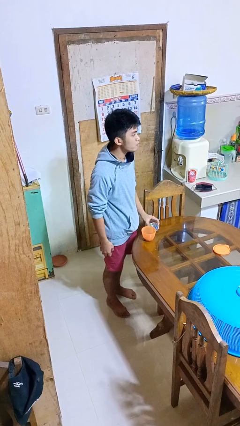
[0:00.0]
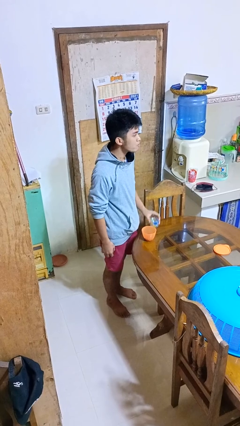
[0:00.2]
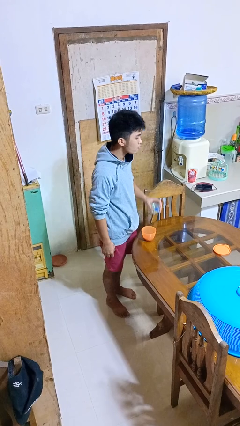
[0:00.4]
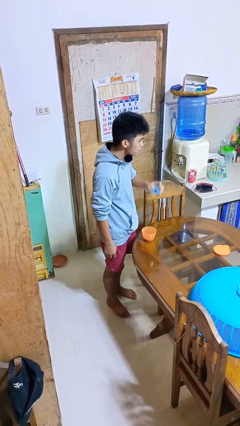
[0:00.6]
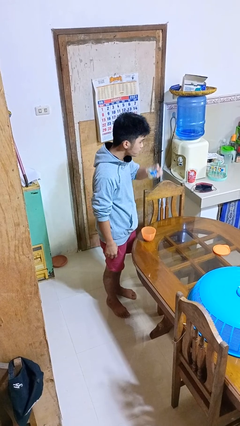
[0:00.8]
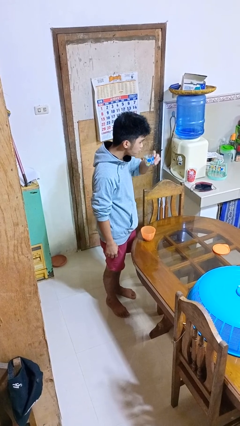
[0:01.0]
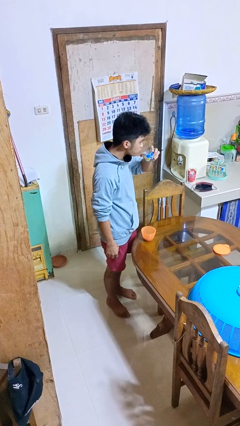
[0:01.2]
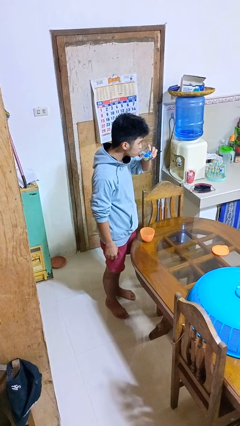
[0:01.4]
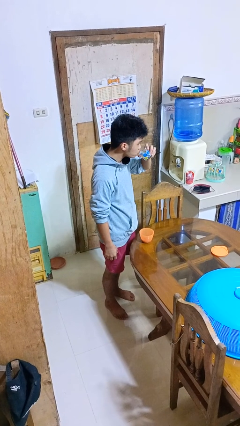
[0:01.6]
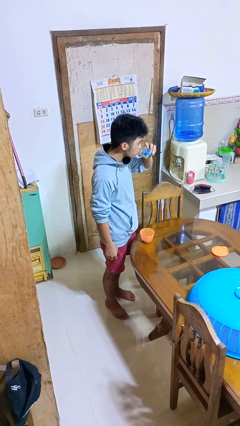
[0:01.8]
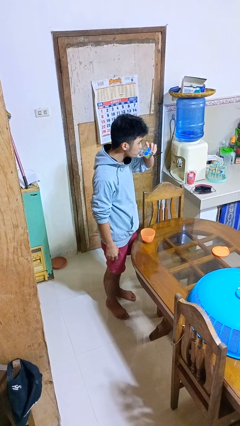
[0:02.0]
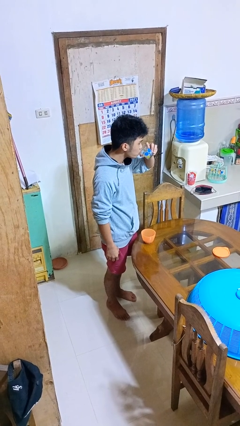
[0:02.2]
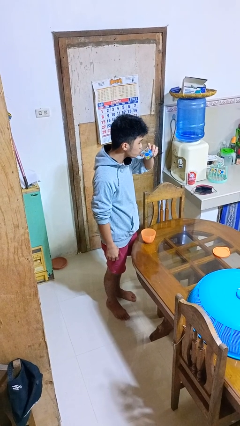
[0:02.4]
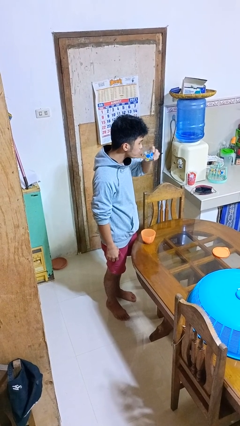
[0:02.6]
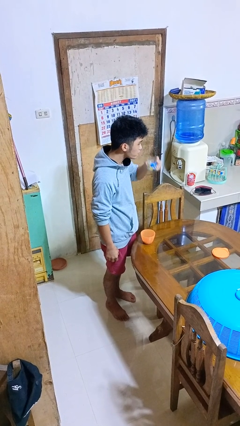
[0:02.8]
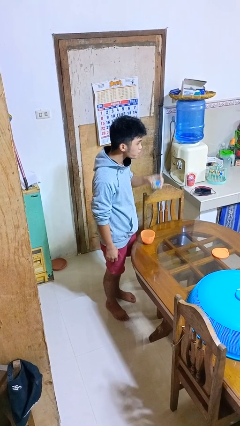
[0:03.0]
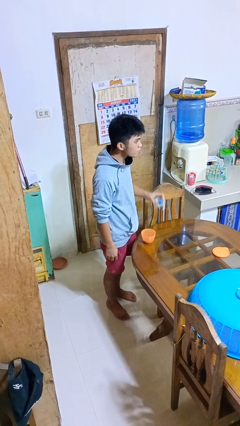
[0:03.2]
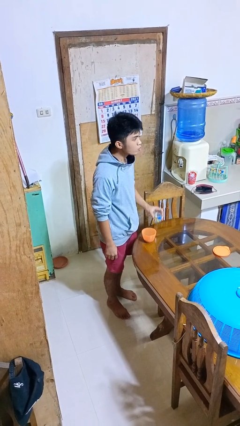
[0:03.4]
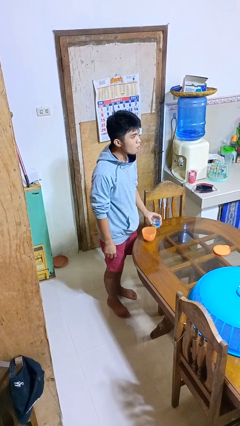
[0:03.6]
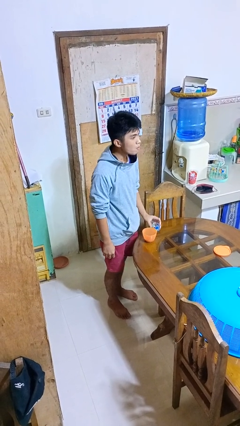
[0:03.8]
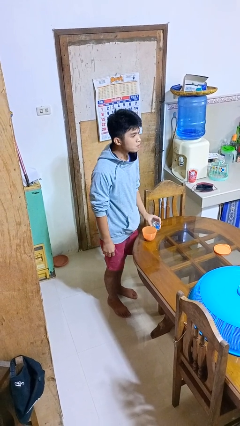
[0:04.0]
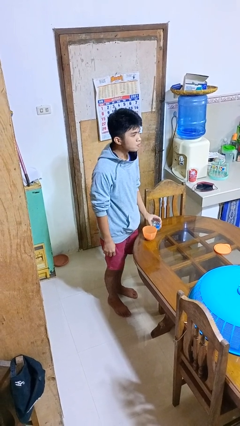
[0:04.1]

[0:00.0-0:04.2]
person drinks from cup

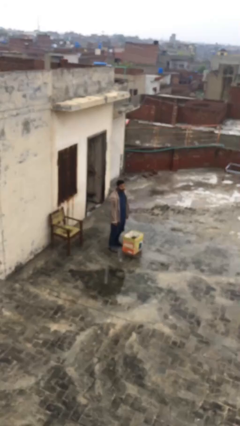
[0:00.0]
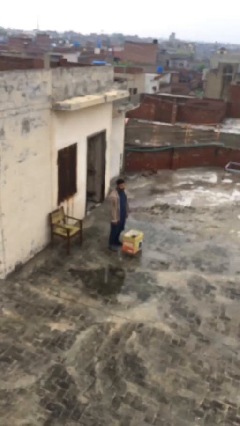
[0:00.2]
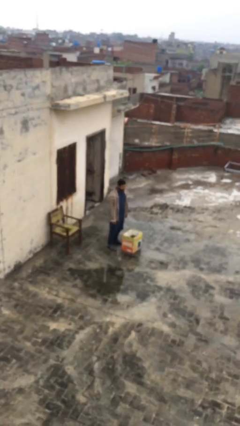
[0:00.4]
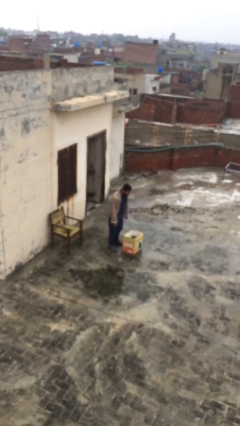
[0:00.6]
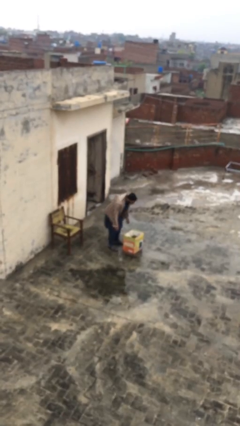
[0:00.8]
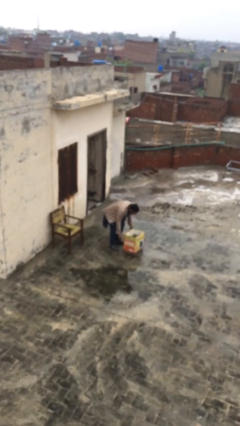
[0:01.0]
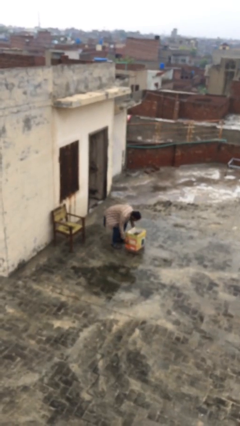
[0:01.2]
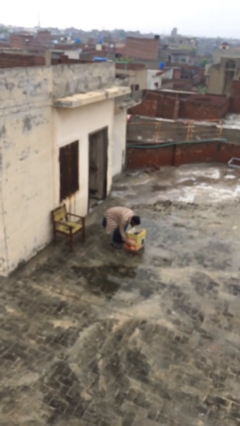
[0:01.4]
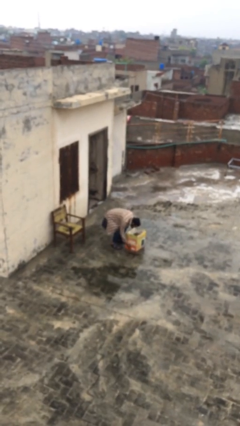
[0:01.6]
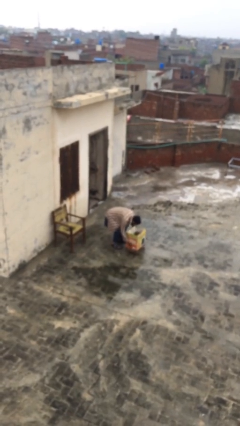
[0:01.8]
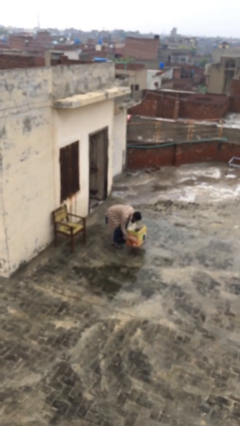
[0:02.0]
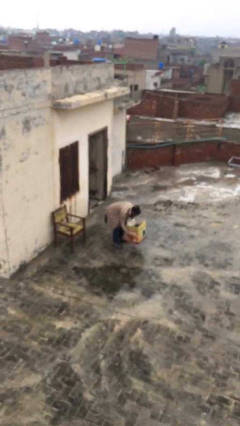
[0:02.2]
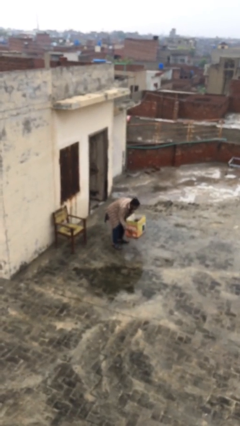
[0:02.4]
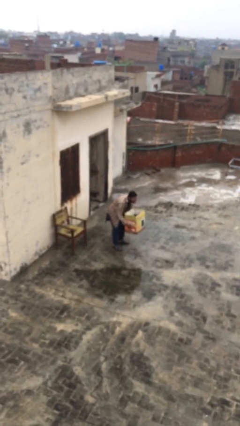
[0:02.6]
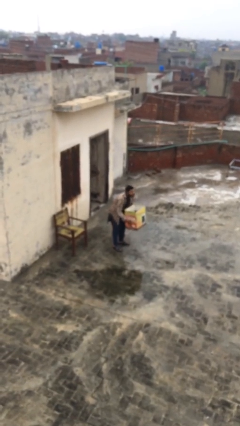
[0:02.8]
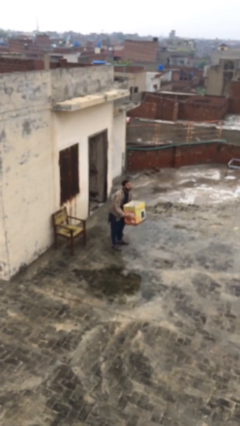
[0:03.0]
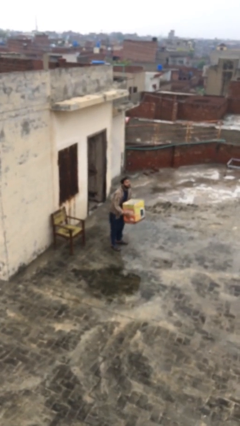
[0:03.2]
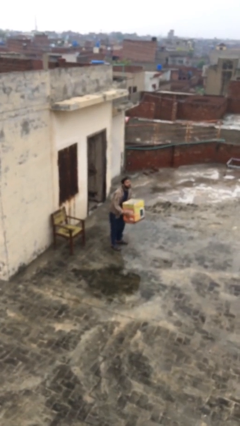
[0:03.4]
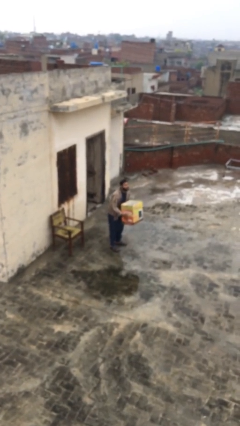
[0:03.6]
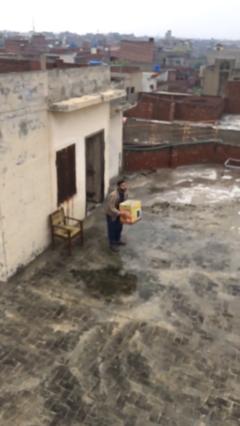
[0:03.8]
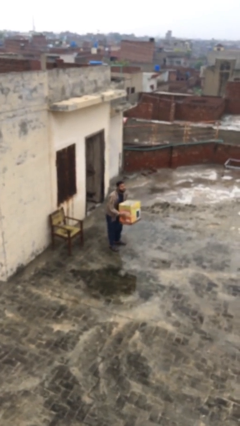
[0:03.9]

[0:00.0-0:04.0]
person picks up object from floor

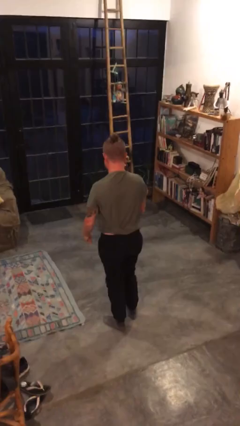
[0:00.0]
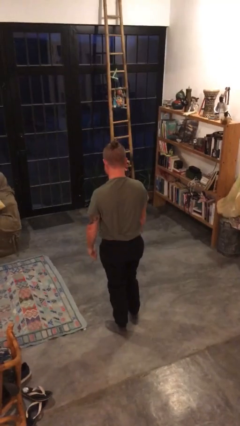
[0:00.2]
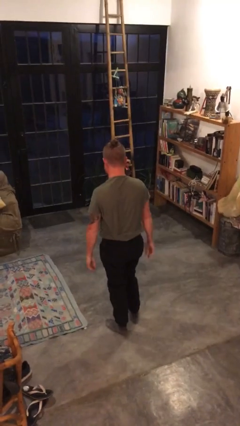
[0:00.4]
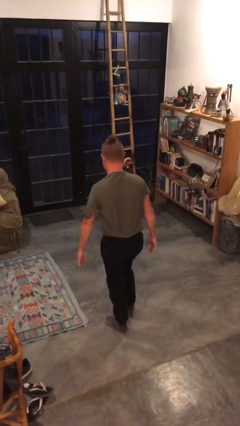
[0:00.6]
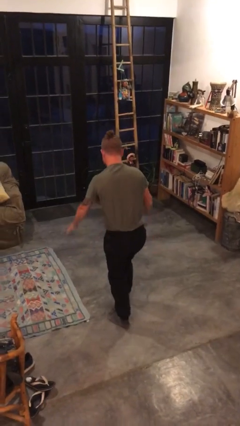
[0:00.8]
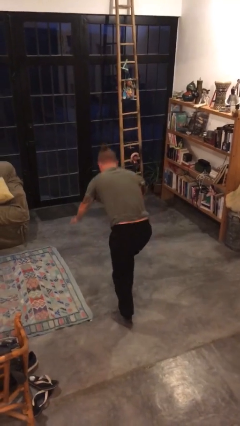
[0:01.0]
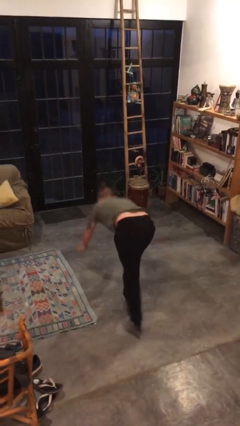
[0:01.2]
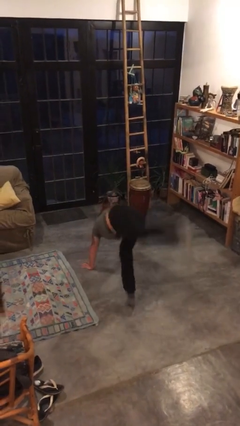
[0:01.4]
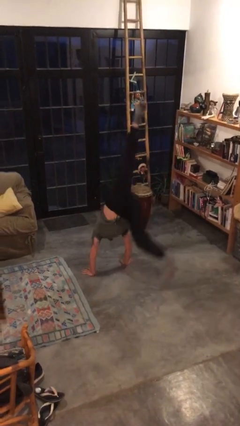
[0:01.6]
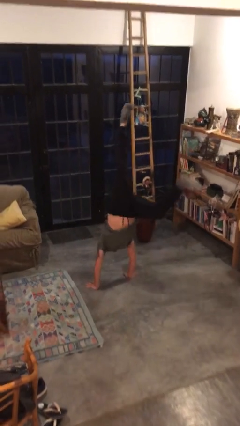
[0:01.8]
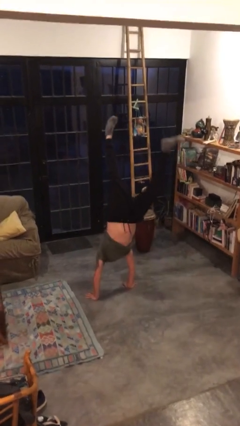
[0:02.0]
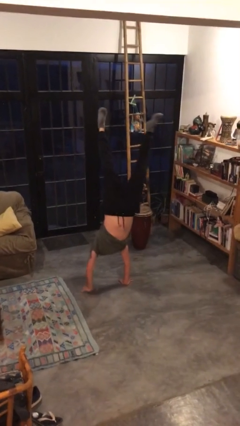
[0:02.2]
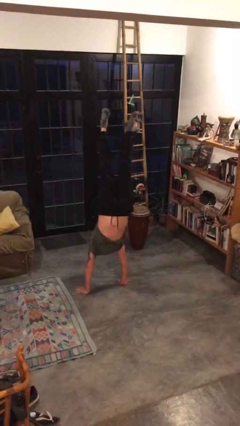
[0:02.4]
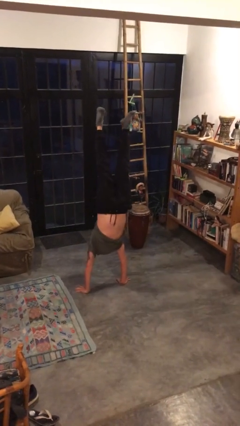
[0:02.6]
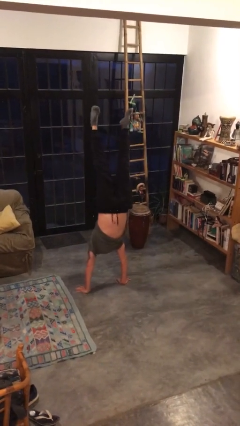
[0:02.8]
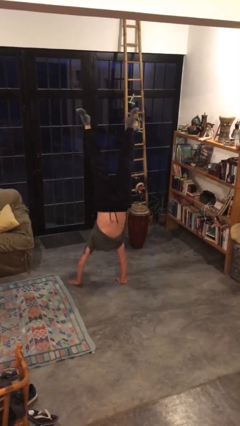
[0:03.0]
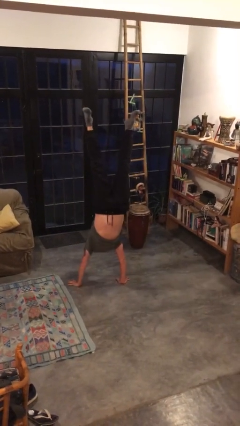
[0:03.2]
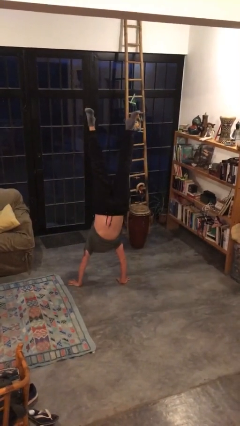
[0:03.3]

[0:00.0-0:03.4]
person handstand

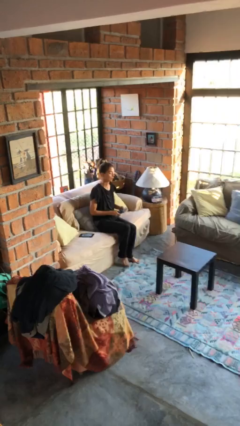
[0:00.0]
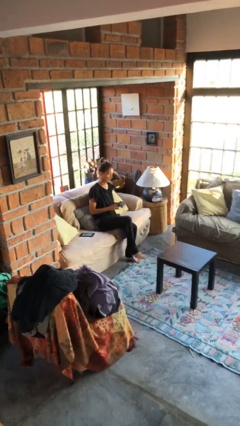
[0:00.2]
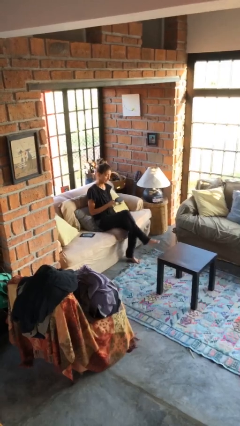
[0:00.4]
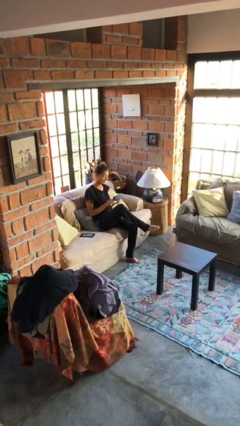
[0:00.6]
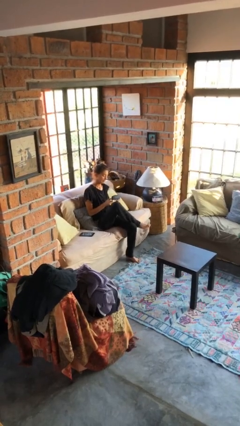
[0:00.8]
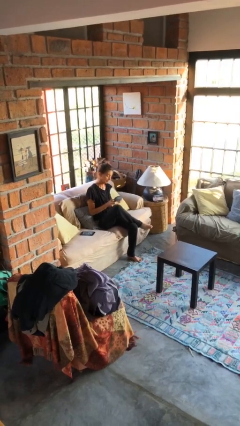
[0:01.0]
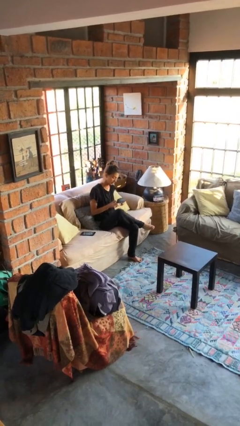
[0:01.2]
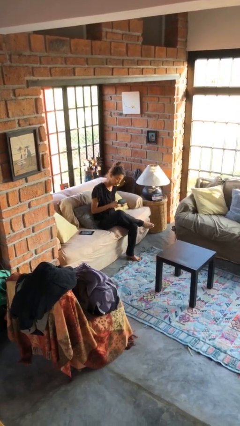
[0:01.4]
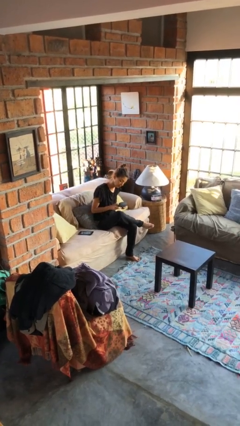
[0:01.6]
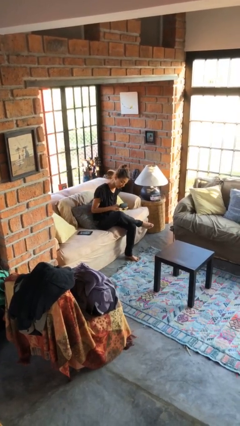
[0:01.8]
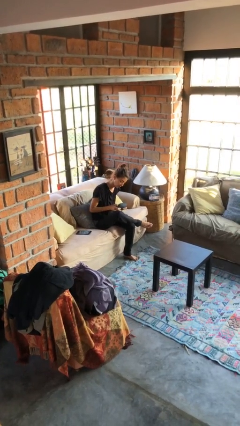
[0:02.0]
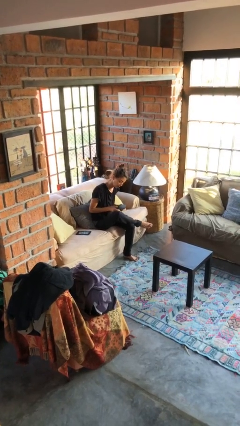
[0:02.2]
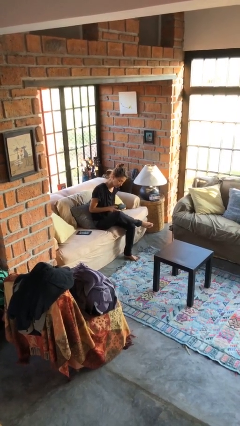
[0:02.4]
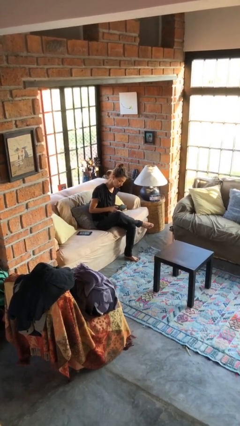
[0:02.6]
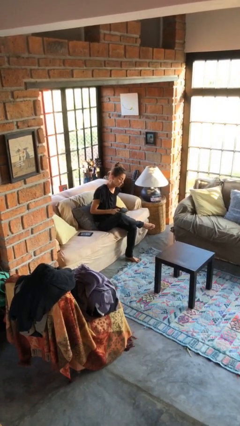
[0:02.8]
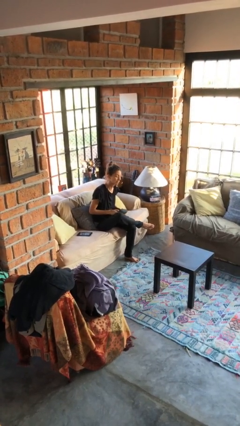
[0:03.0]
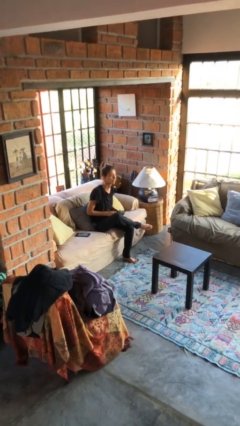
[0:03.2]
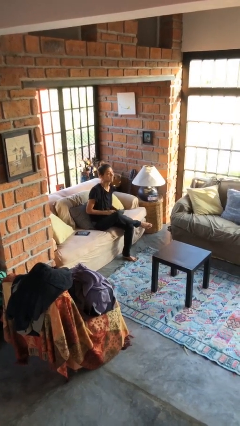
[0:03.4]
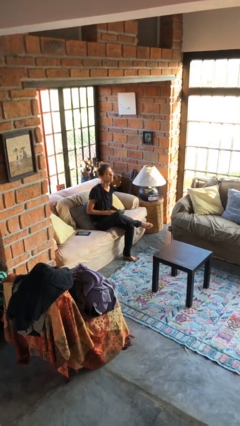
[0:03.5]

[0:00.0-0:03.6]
person interacts with handheld game

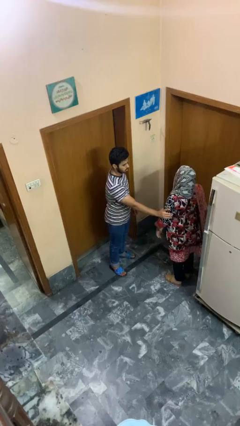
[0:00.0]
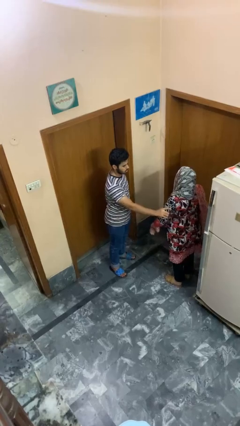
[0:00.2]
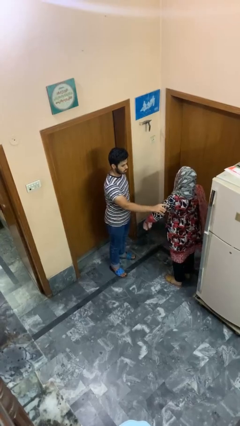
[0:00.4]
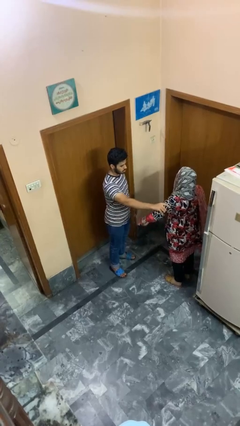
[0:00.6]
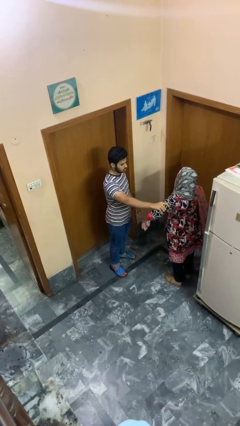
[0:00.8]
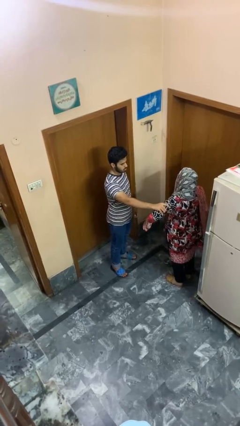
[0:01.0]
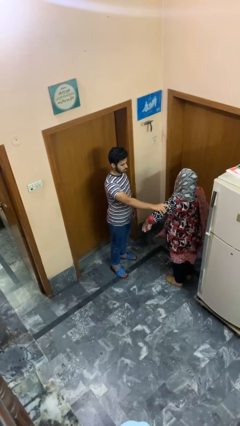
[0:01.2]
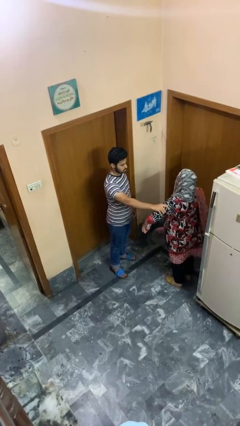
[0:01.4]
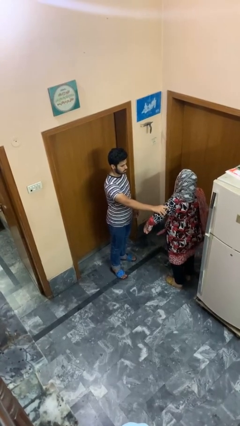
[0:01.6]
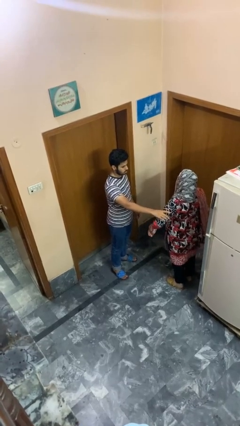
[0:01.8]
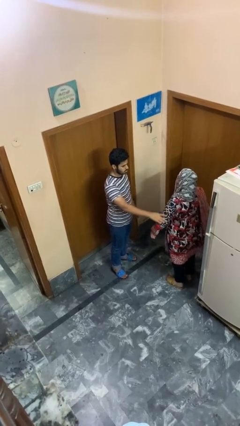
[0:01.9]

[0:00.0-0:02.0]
person grabs person by bicep

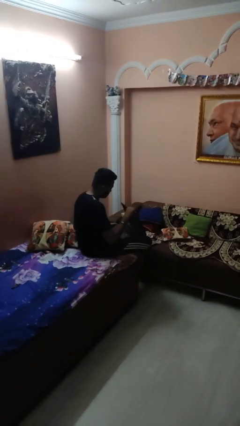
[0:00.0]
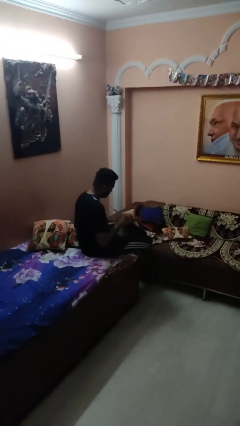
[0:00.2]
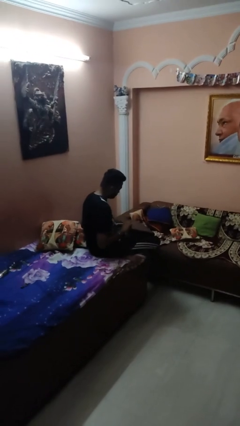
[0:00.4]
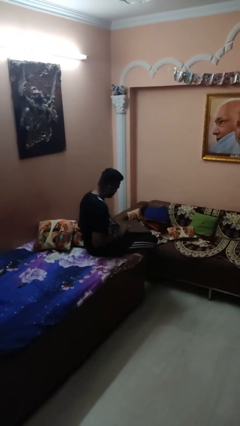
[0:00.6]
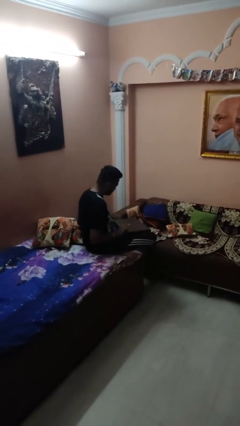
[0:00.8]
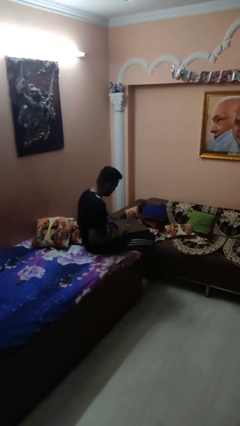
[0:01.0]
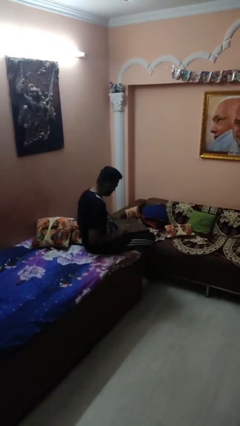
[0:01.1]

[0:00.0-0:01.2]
person closes laptop
